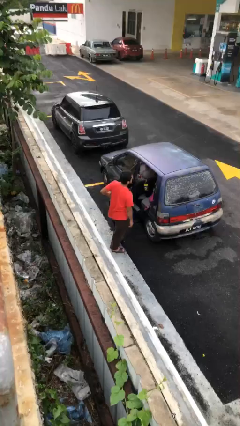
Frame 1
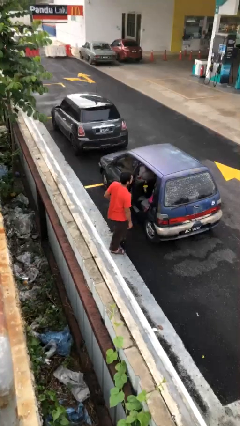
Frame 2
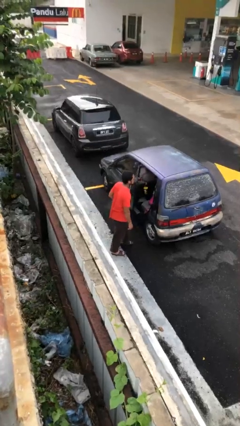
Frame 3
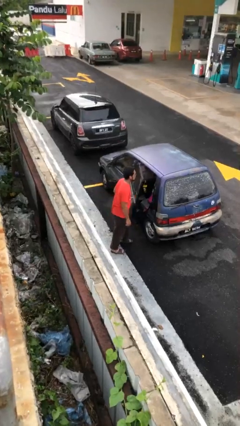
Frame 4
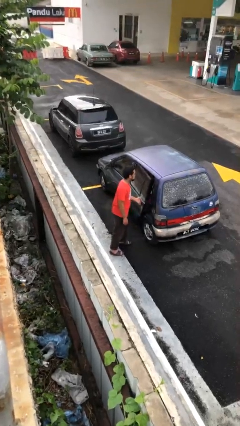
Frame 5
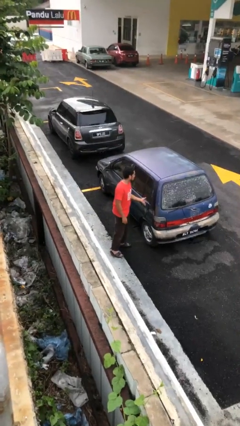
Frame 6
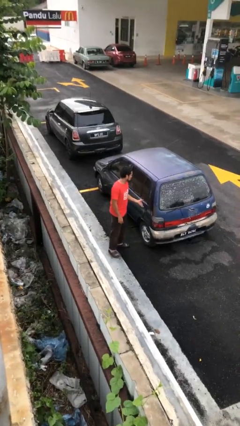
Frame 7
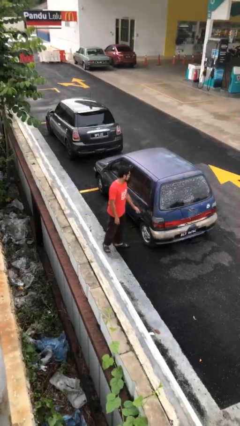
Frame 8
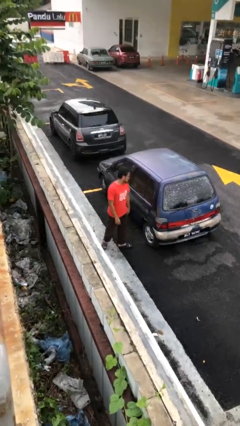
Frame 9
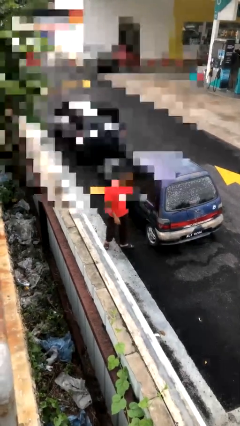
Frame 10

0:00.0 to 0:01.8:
person closes car door

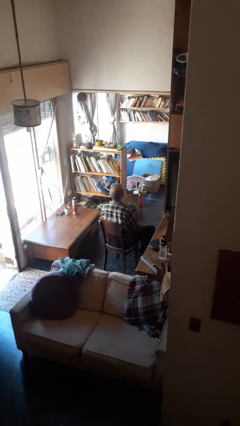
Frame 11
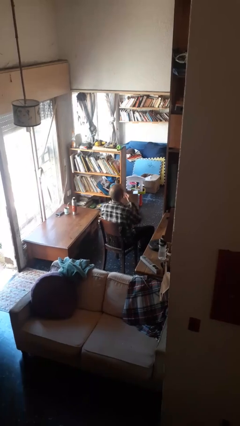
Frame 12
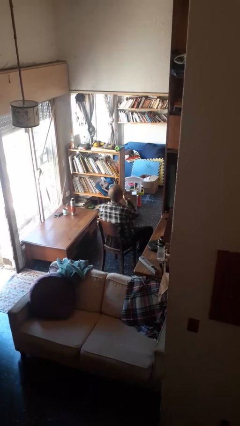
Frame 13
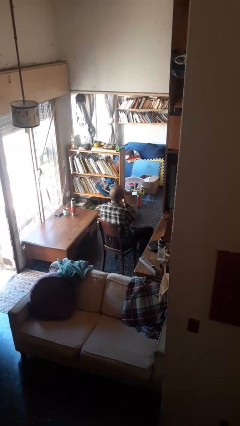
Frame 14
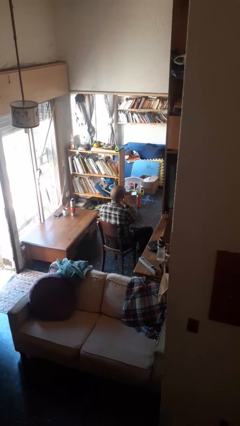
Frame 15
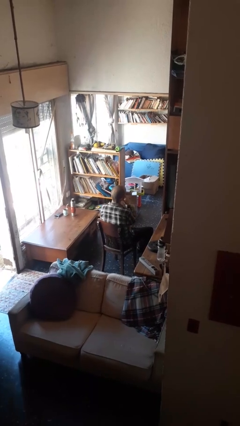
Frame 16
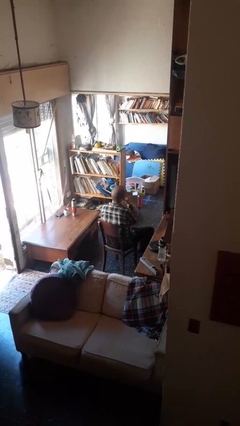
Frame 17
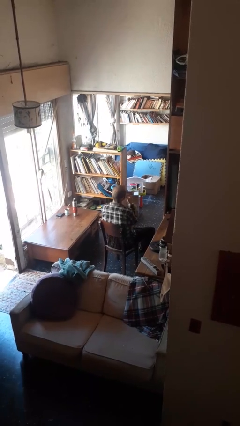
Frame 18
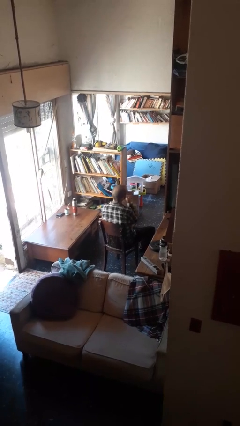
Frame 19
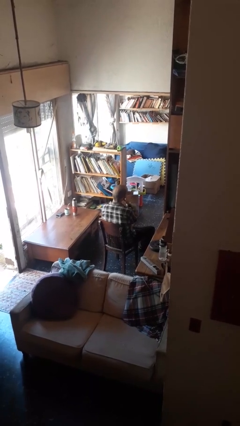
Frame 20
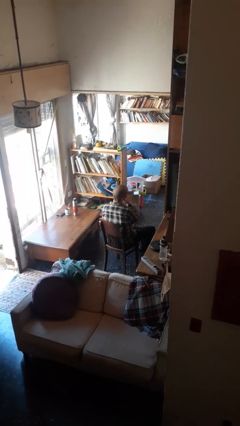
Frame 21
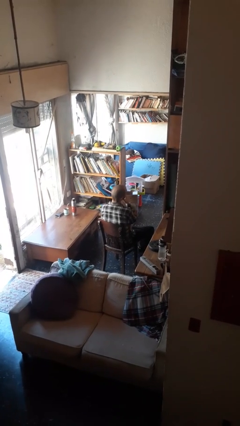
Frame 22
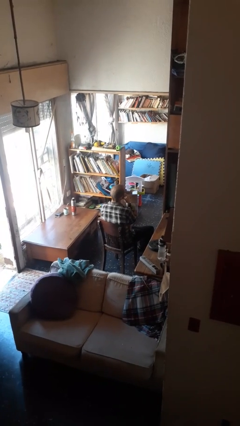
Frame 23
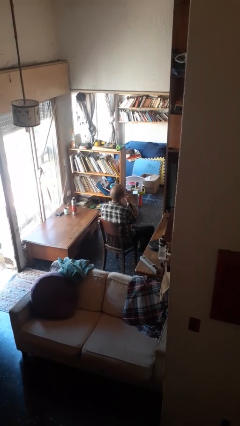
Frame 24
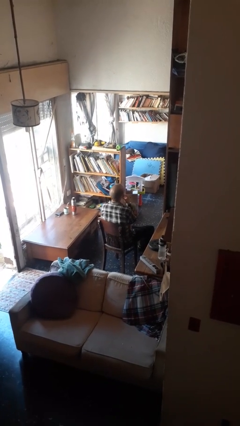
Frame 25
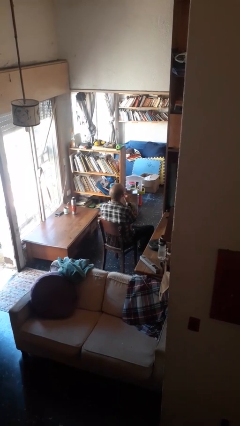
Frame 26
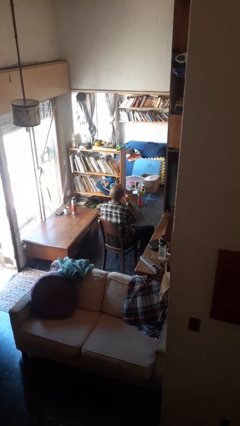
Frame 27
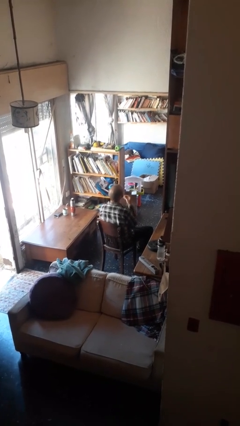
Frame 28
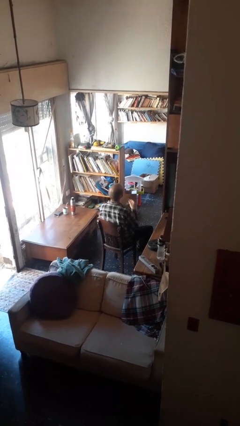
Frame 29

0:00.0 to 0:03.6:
person strokes chin

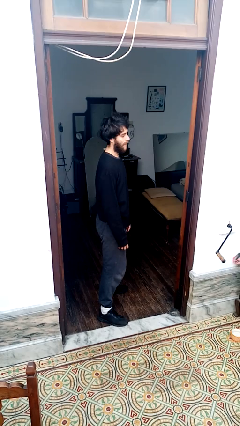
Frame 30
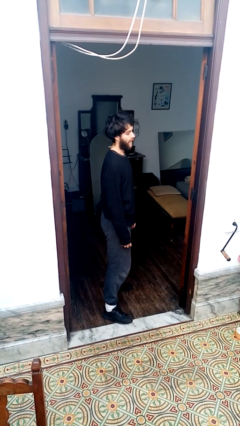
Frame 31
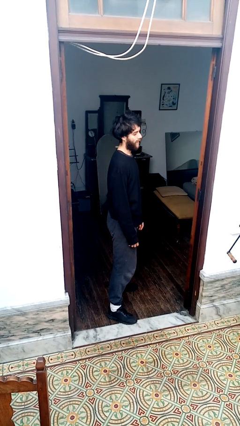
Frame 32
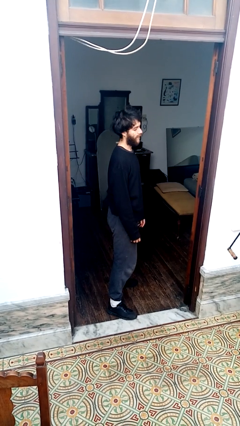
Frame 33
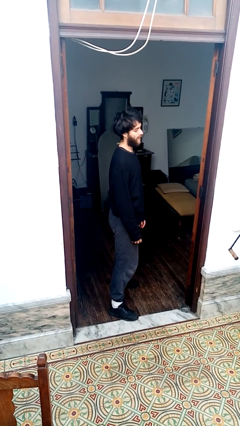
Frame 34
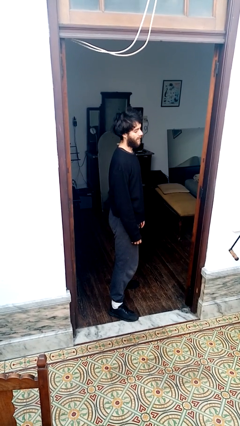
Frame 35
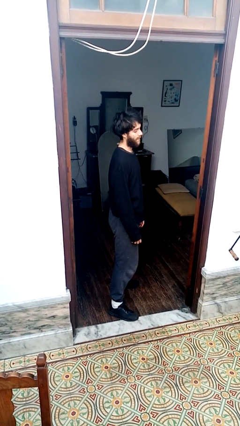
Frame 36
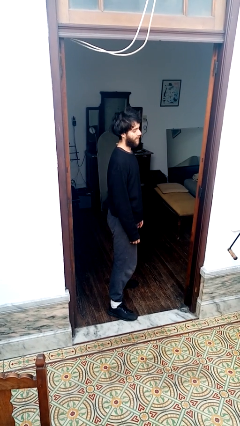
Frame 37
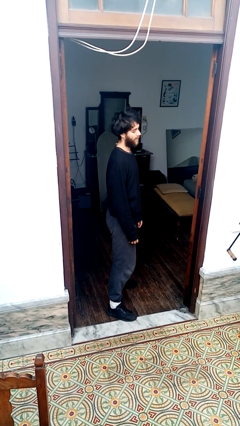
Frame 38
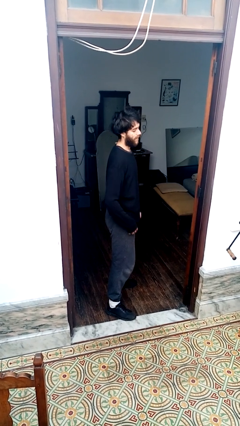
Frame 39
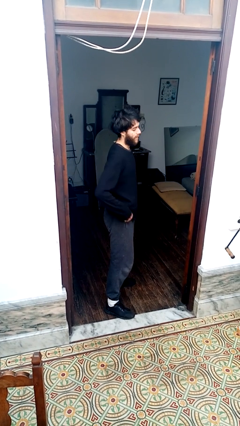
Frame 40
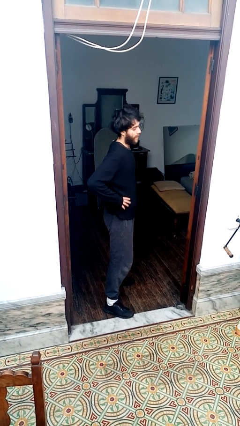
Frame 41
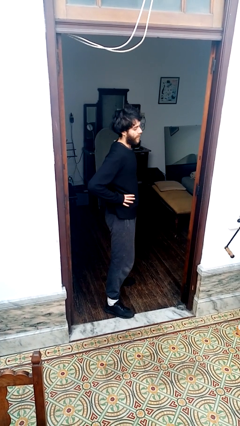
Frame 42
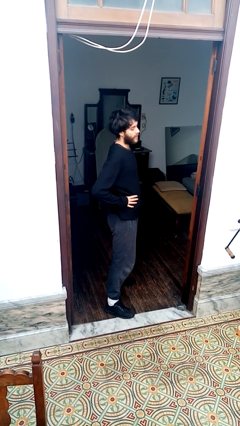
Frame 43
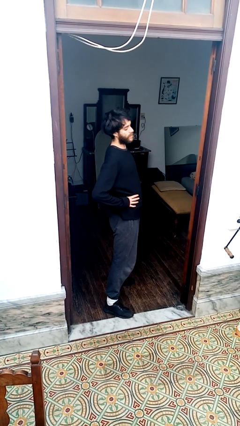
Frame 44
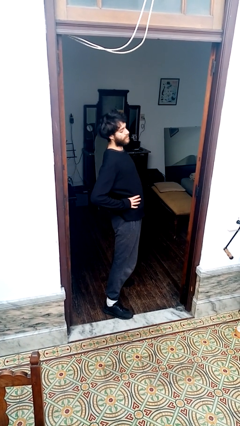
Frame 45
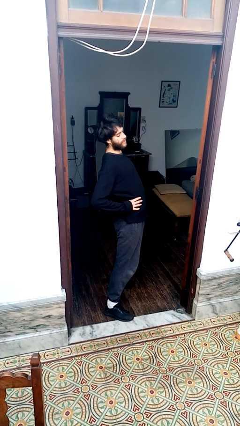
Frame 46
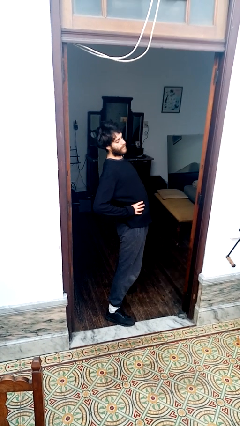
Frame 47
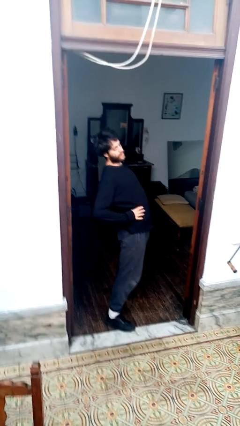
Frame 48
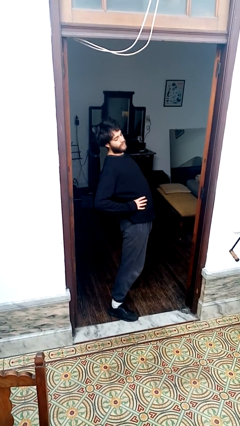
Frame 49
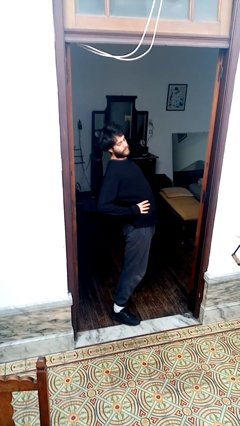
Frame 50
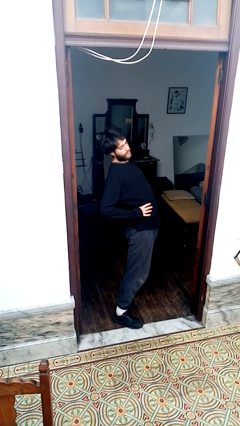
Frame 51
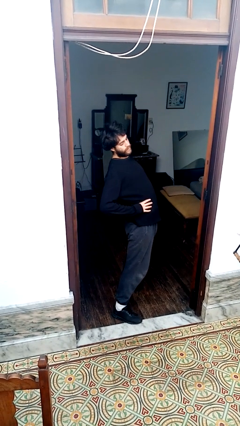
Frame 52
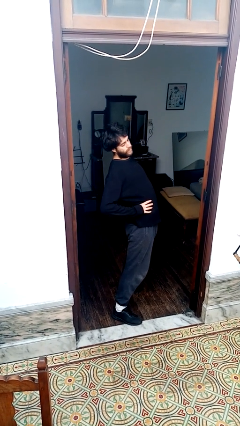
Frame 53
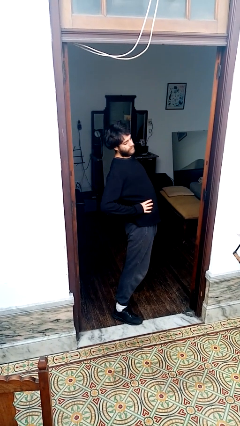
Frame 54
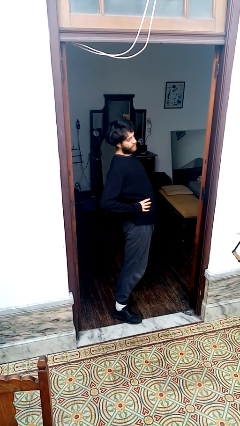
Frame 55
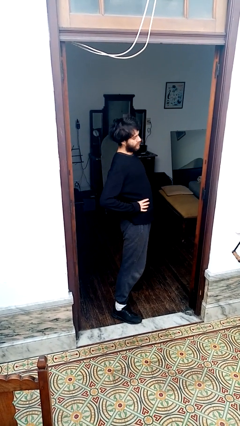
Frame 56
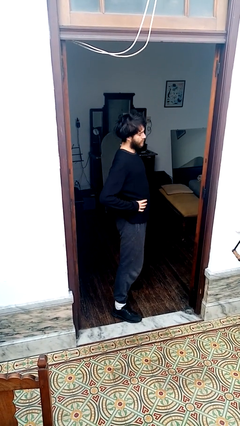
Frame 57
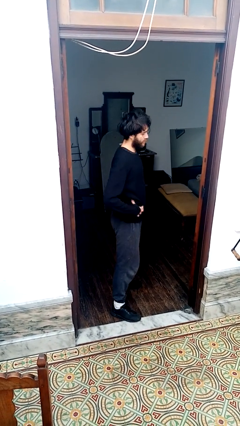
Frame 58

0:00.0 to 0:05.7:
person stretches back

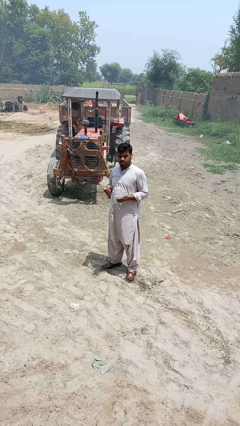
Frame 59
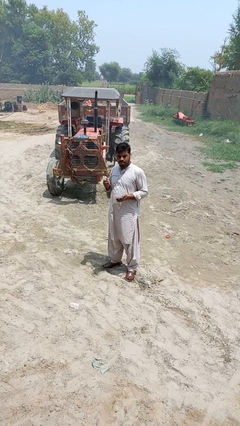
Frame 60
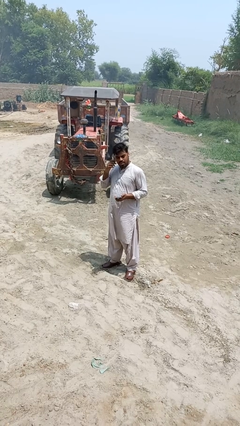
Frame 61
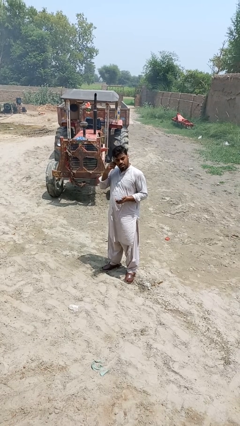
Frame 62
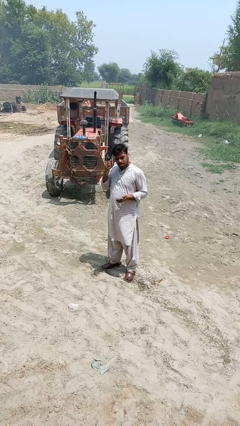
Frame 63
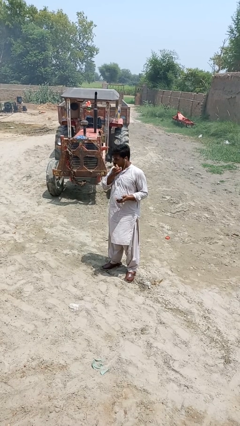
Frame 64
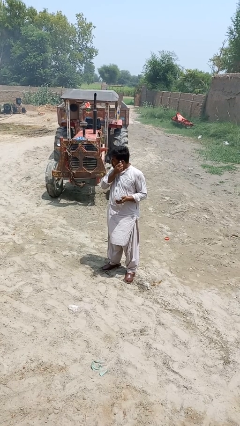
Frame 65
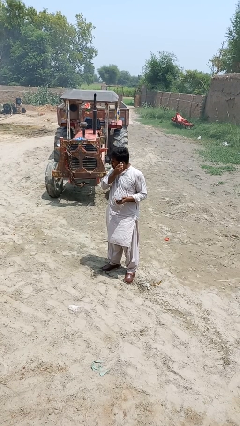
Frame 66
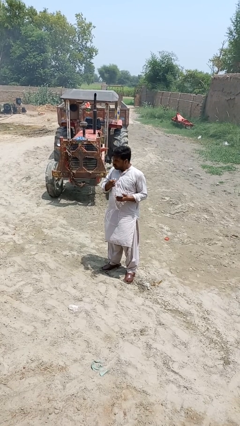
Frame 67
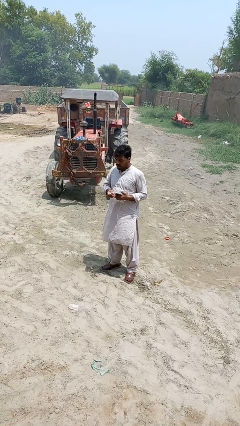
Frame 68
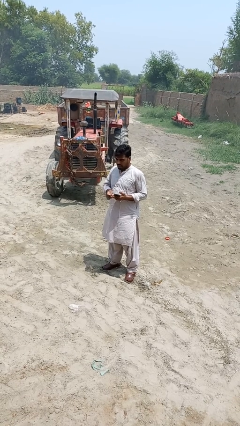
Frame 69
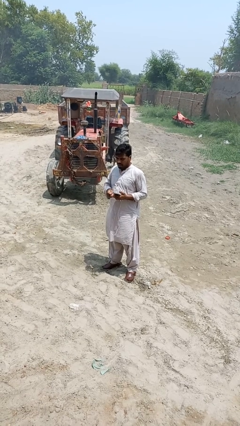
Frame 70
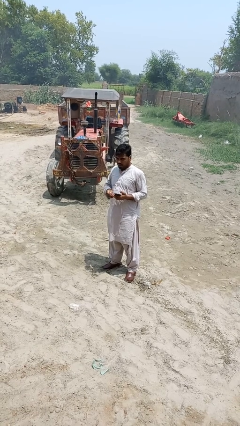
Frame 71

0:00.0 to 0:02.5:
person takes off headphones

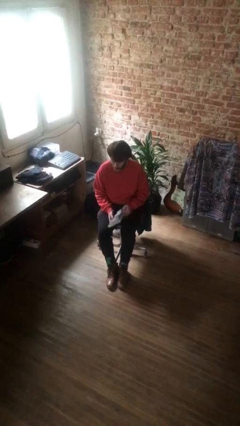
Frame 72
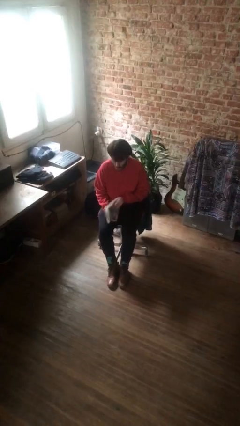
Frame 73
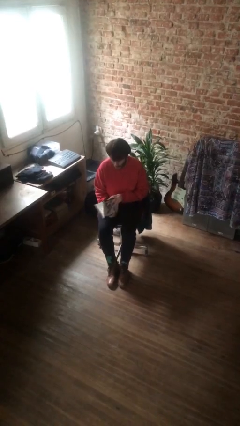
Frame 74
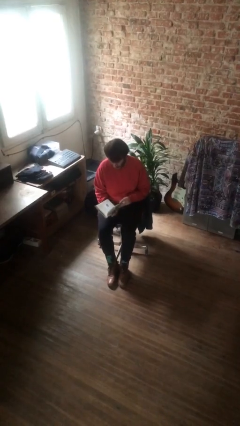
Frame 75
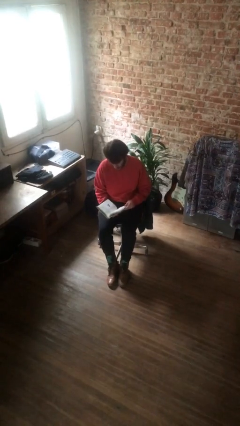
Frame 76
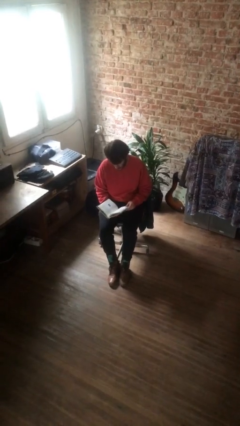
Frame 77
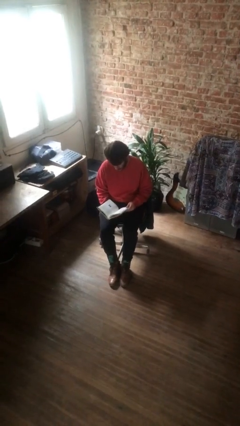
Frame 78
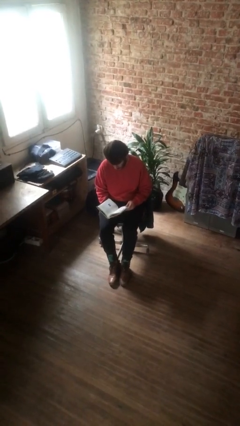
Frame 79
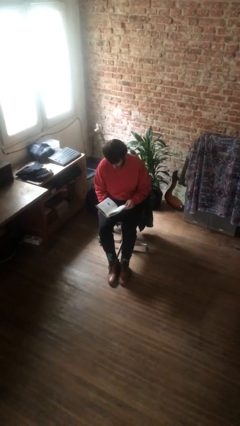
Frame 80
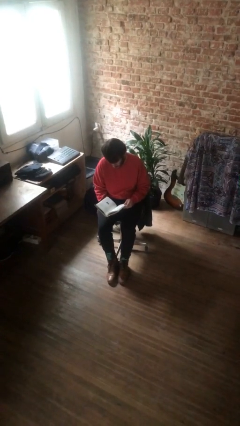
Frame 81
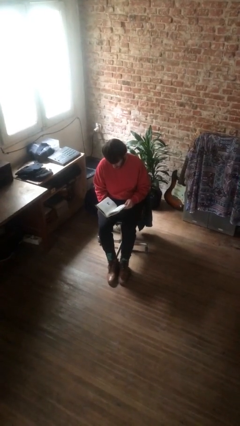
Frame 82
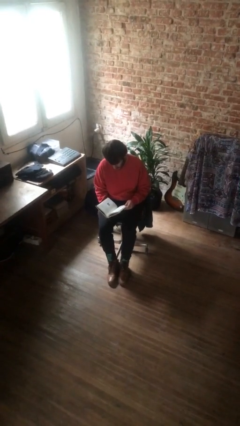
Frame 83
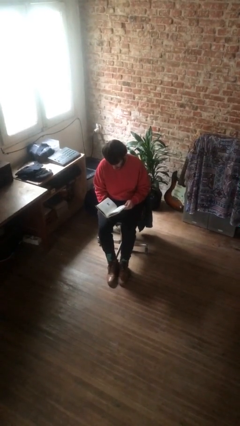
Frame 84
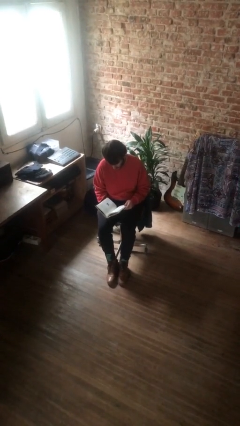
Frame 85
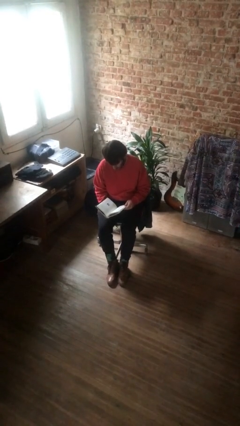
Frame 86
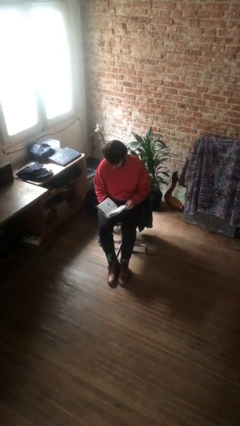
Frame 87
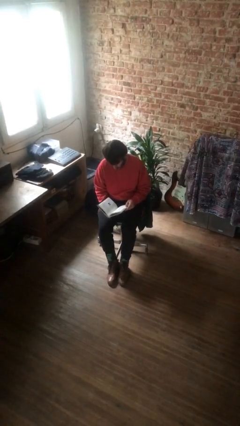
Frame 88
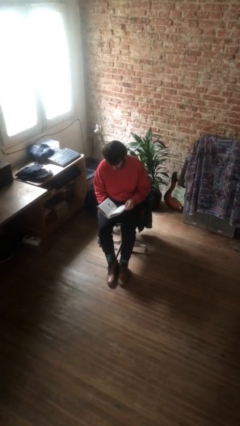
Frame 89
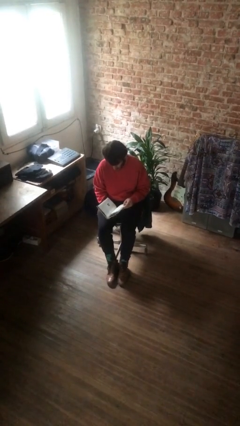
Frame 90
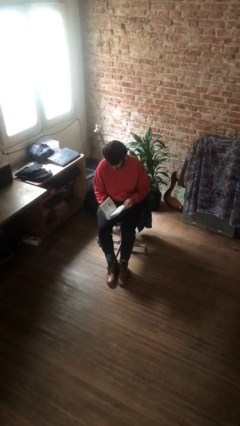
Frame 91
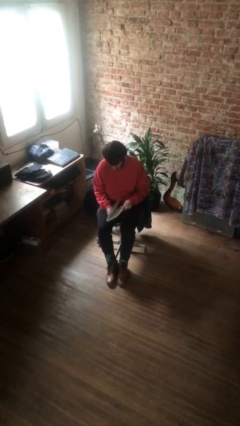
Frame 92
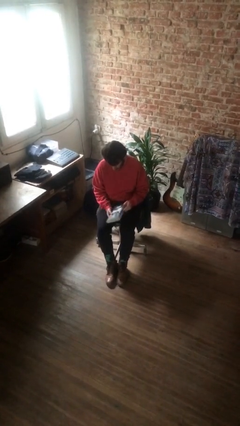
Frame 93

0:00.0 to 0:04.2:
person reads book
